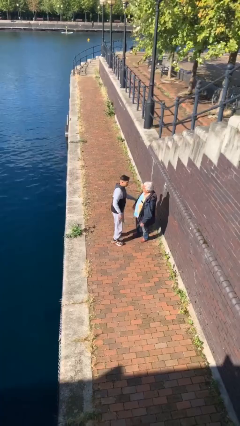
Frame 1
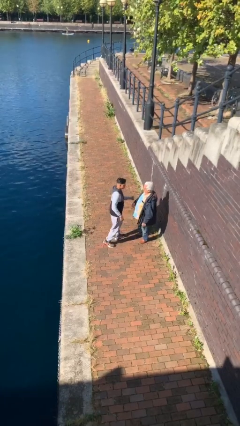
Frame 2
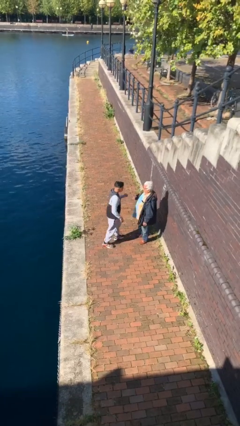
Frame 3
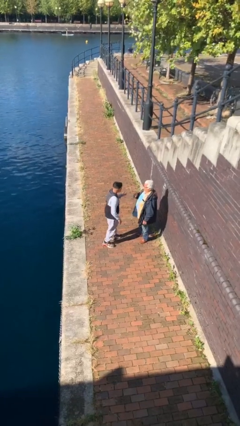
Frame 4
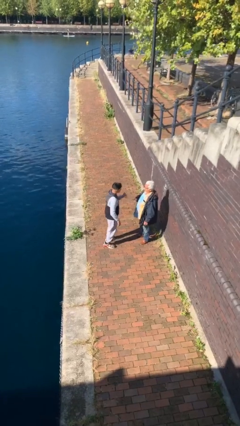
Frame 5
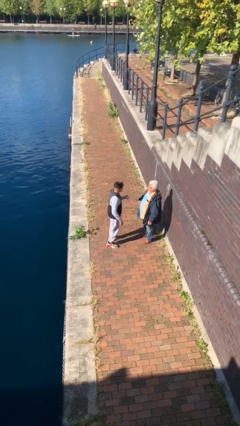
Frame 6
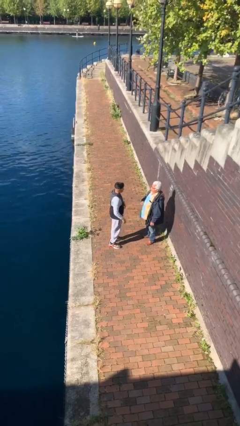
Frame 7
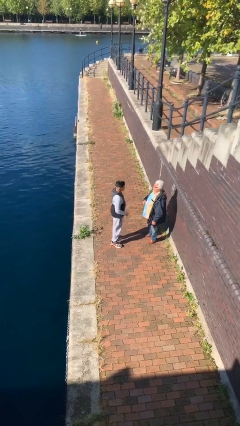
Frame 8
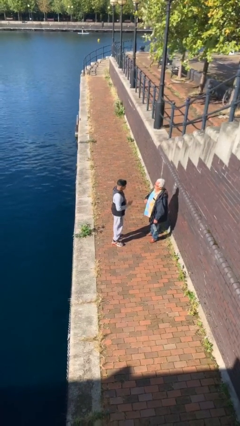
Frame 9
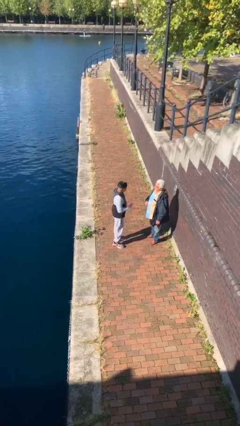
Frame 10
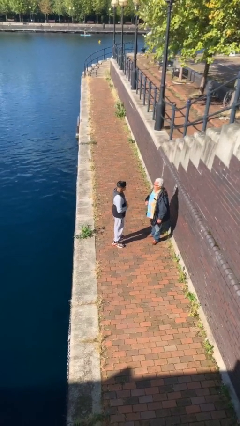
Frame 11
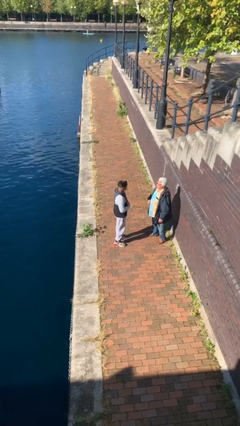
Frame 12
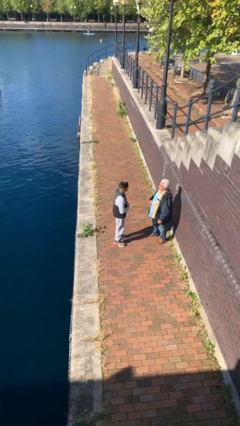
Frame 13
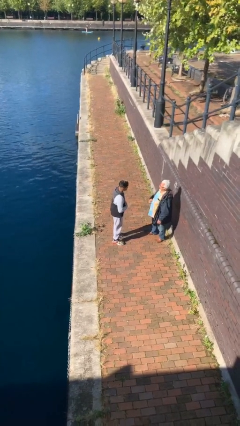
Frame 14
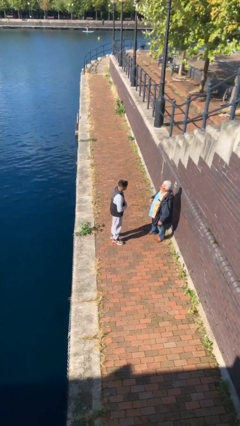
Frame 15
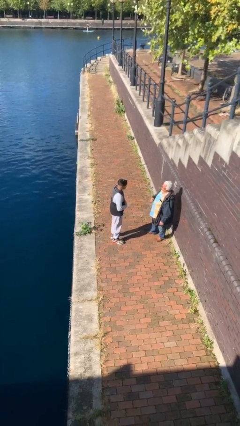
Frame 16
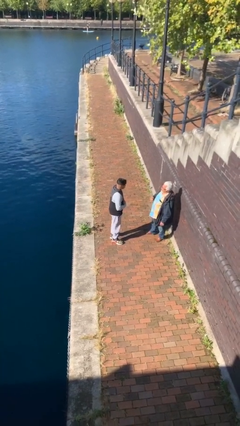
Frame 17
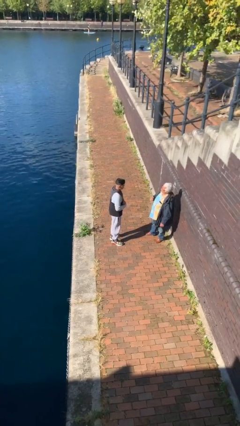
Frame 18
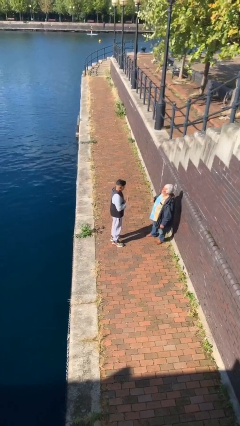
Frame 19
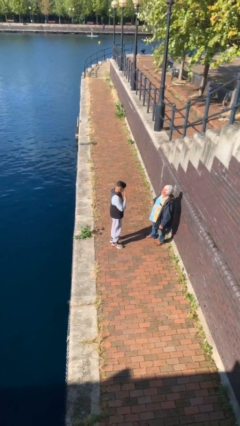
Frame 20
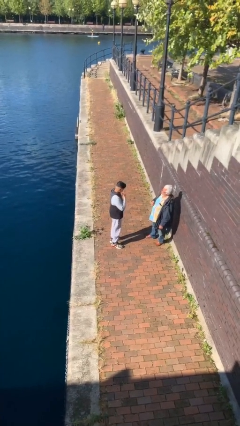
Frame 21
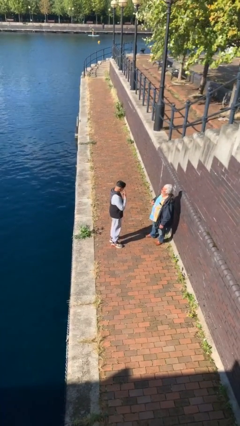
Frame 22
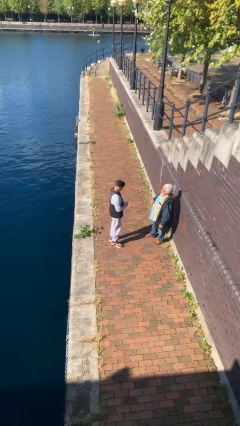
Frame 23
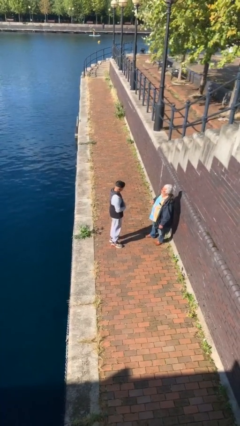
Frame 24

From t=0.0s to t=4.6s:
person talks to person

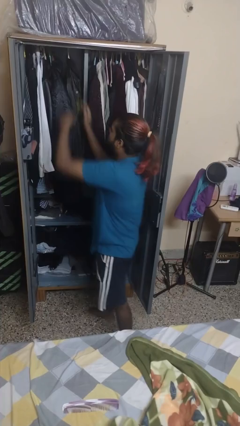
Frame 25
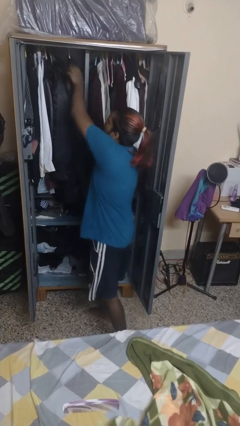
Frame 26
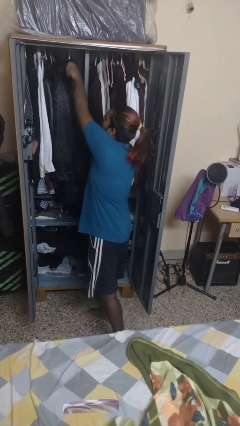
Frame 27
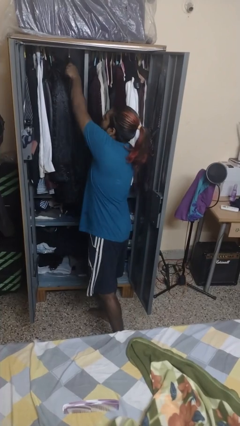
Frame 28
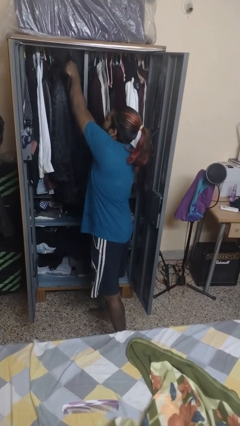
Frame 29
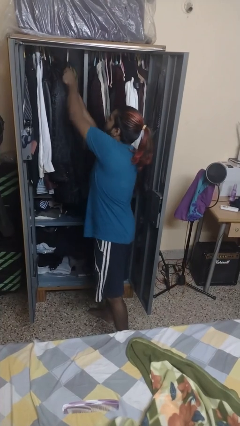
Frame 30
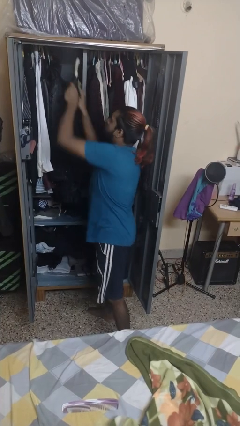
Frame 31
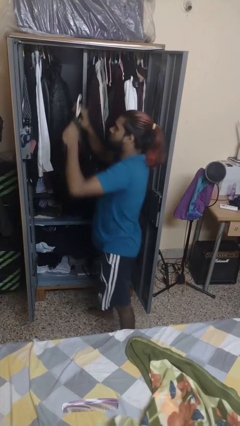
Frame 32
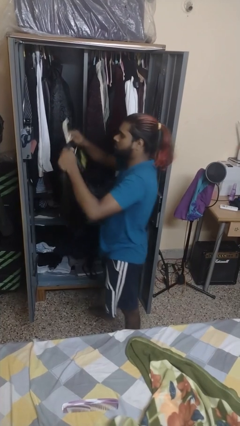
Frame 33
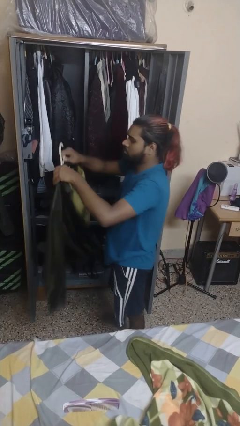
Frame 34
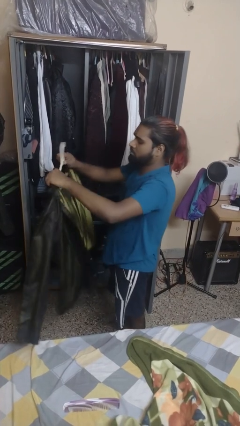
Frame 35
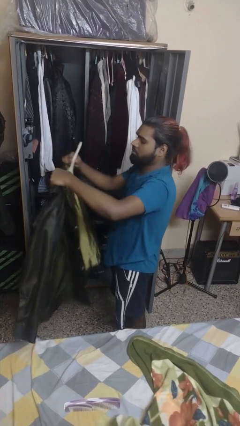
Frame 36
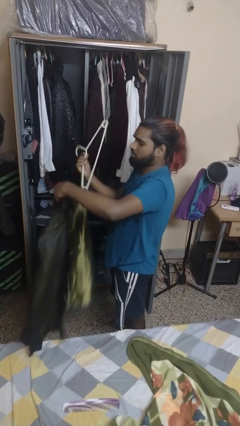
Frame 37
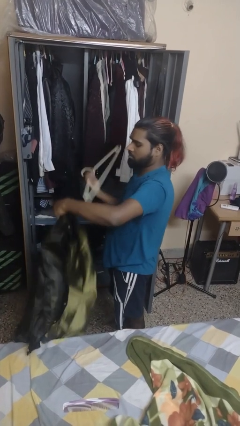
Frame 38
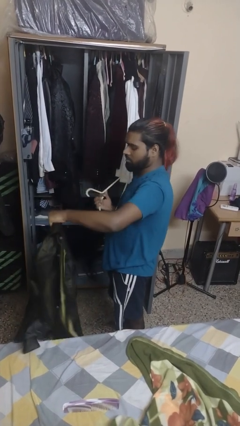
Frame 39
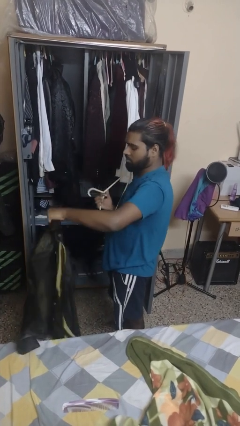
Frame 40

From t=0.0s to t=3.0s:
person takes clothes from dresser

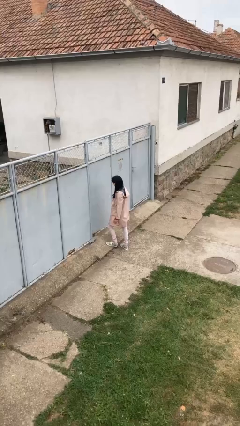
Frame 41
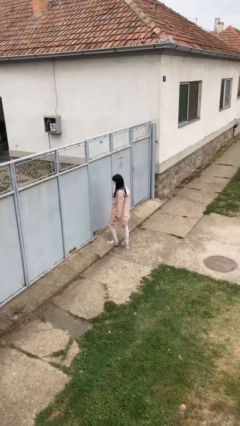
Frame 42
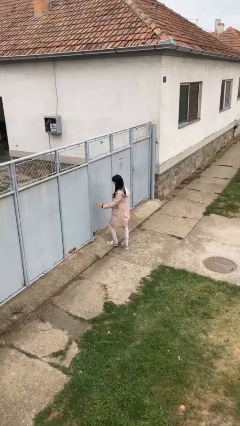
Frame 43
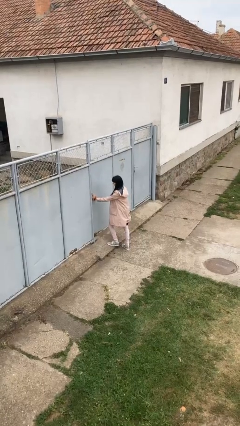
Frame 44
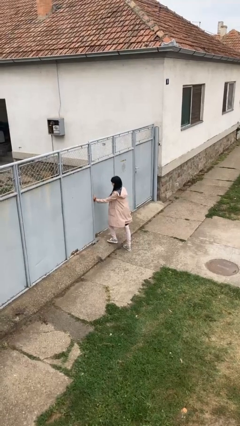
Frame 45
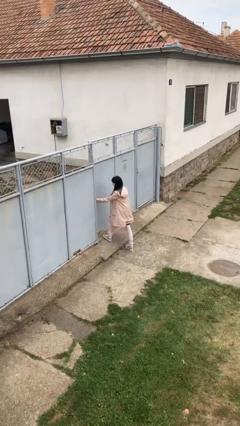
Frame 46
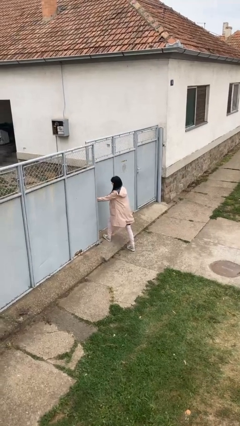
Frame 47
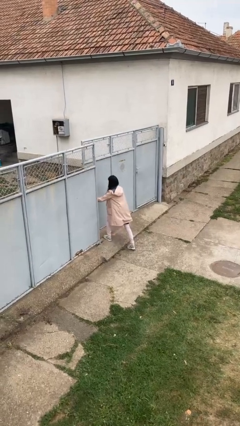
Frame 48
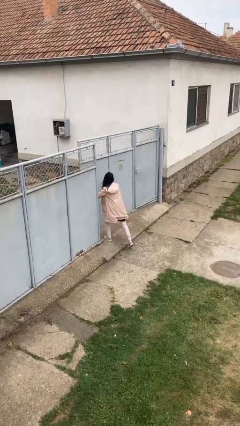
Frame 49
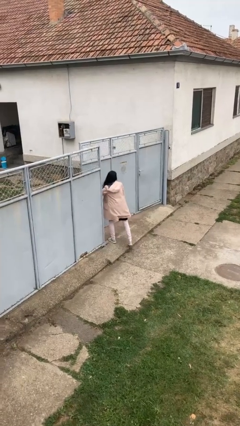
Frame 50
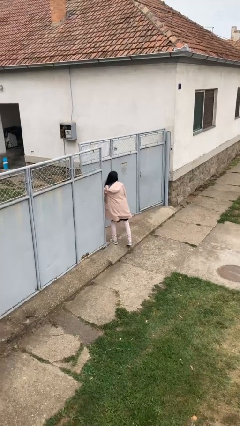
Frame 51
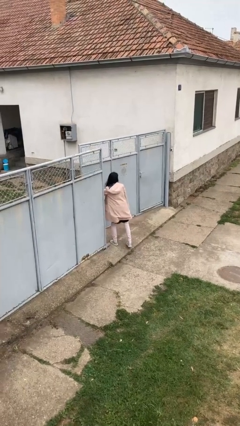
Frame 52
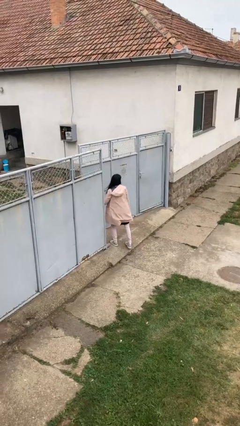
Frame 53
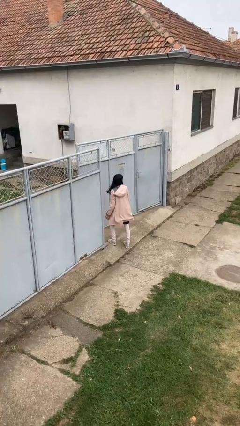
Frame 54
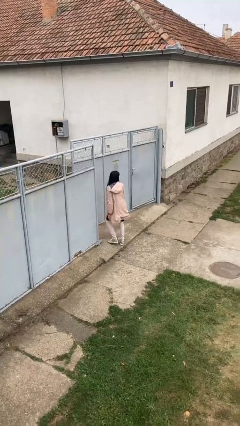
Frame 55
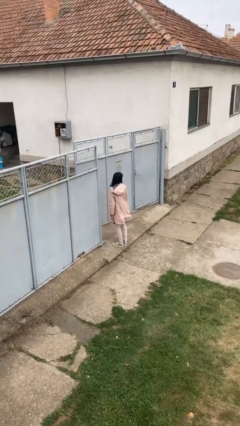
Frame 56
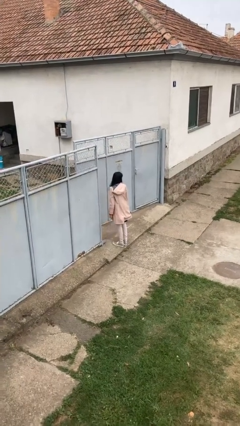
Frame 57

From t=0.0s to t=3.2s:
person opens gate

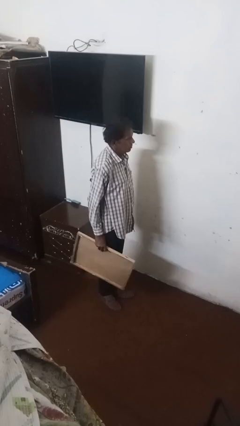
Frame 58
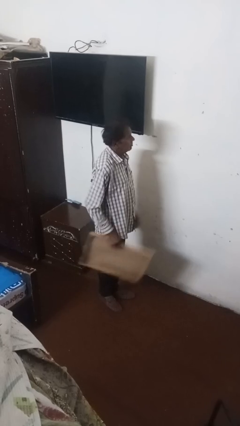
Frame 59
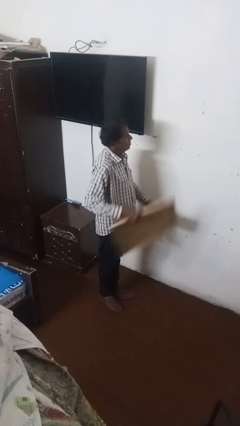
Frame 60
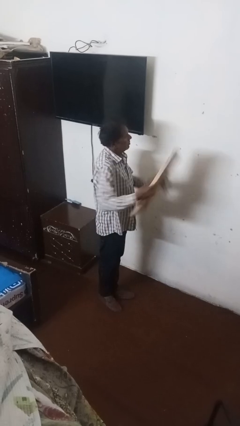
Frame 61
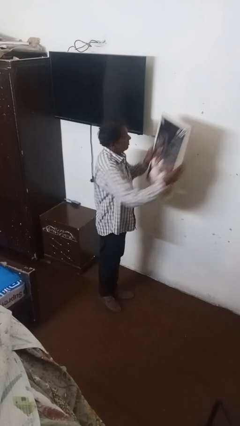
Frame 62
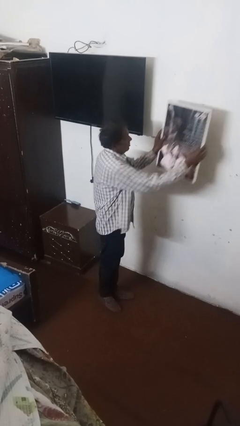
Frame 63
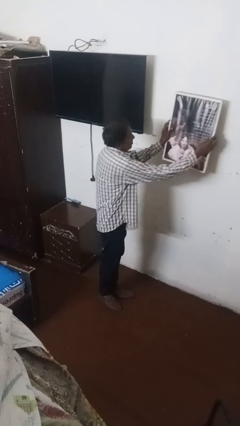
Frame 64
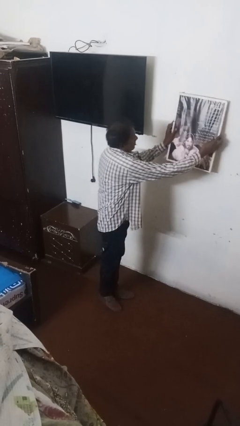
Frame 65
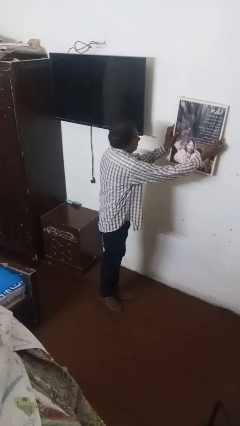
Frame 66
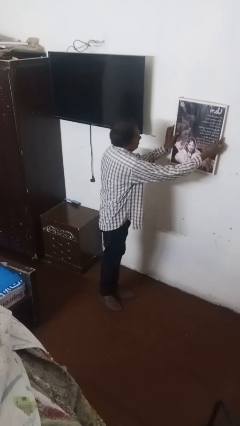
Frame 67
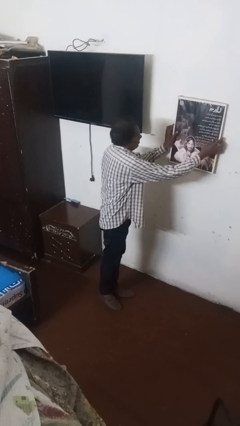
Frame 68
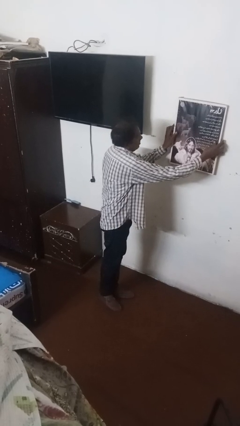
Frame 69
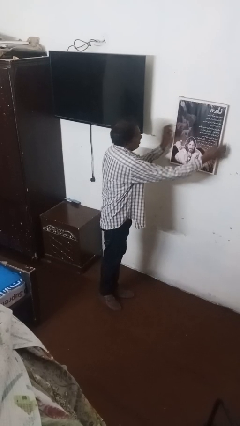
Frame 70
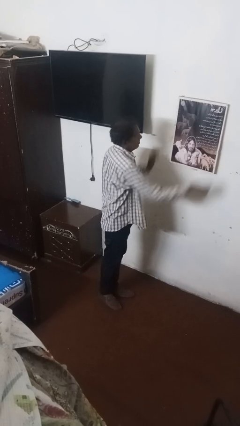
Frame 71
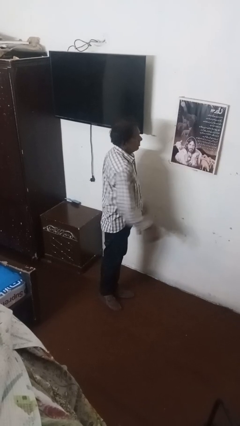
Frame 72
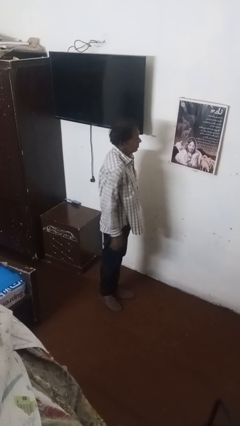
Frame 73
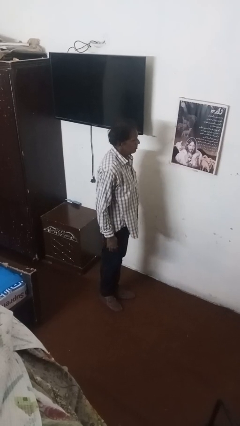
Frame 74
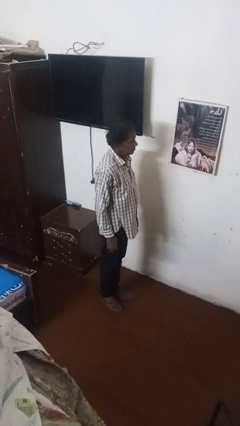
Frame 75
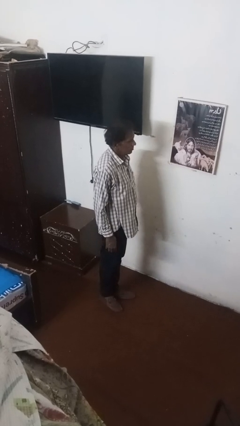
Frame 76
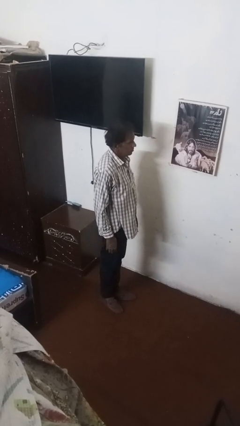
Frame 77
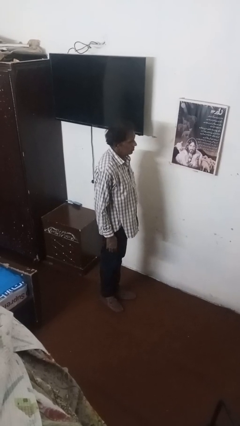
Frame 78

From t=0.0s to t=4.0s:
person puts up picture frame

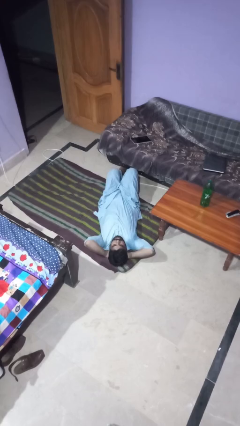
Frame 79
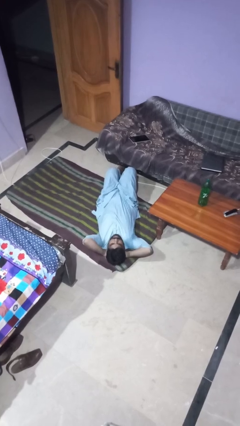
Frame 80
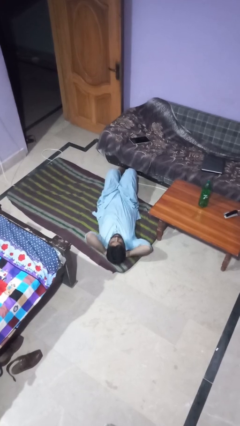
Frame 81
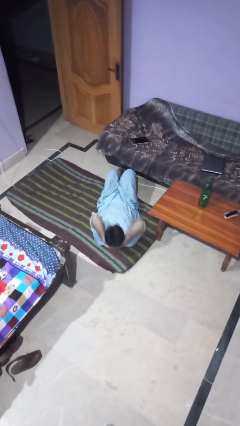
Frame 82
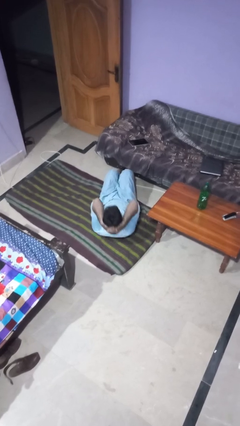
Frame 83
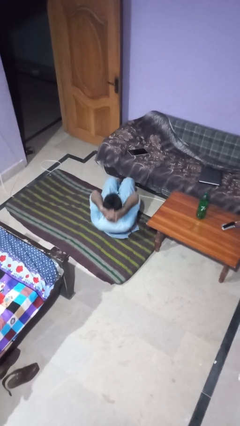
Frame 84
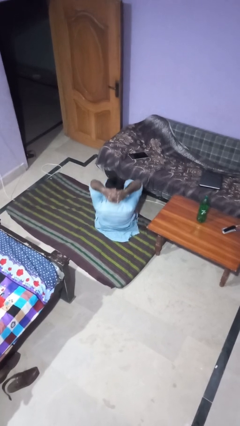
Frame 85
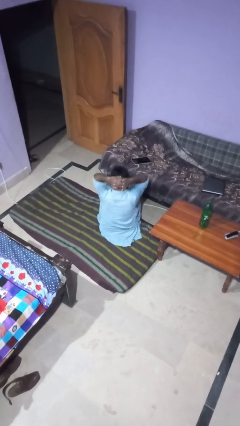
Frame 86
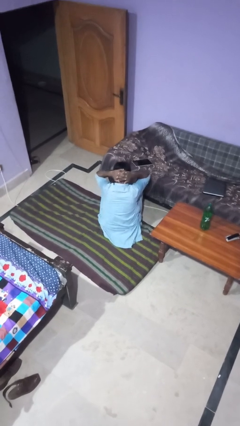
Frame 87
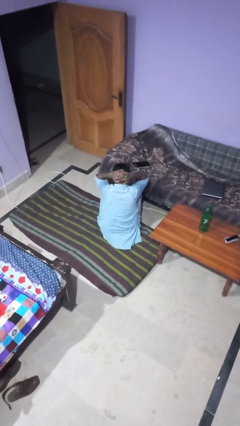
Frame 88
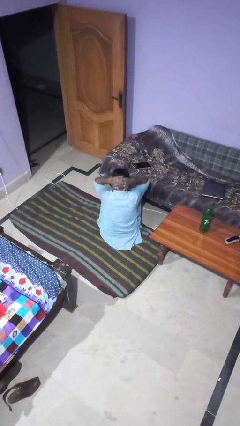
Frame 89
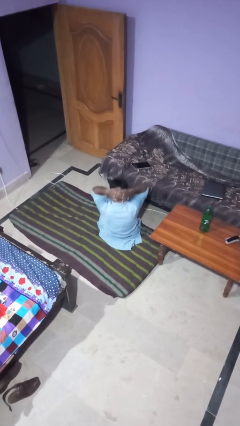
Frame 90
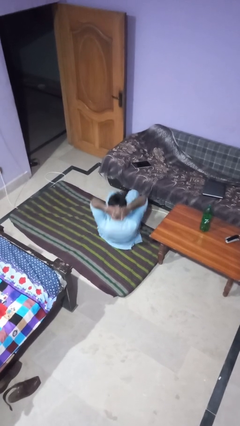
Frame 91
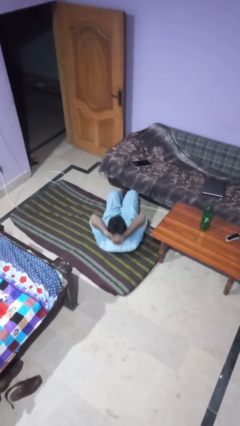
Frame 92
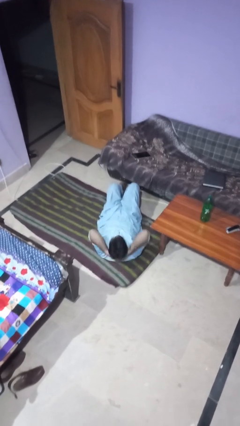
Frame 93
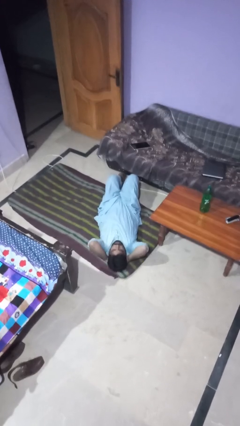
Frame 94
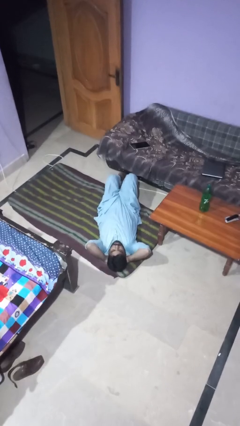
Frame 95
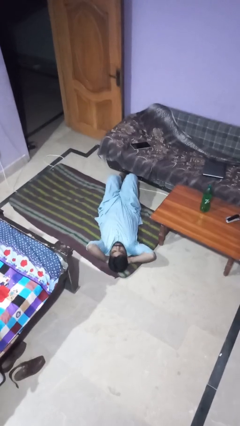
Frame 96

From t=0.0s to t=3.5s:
person exercises with situp
